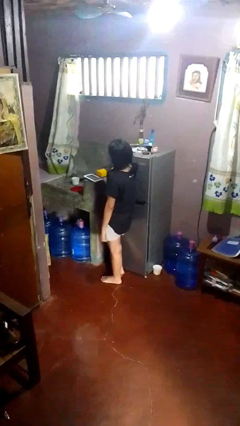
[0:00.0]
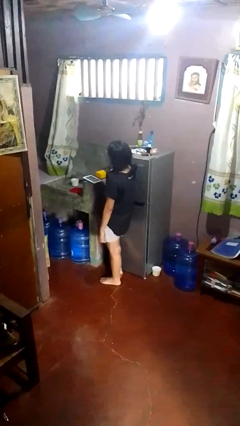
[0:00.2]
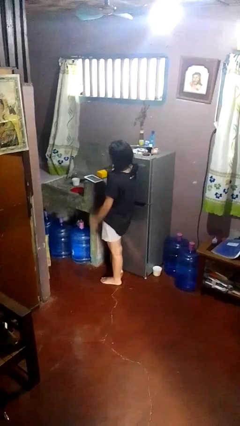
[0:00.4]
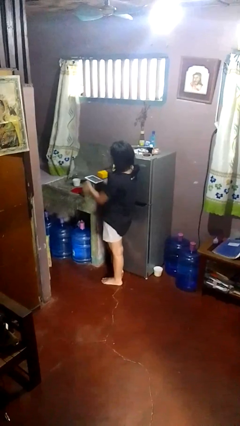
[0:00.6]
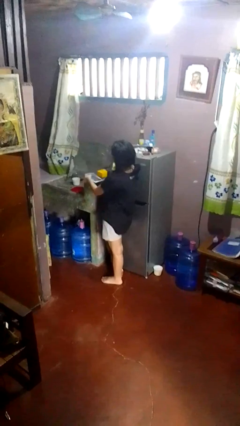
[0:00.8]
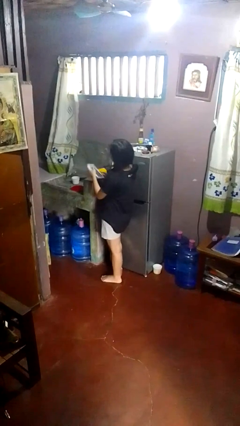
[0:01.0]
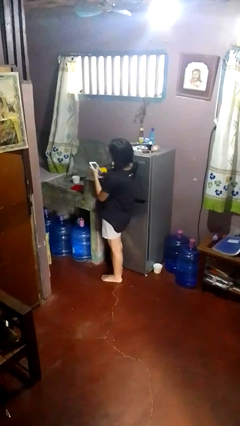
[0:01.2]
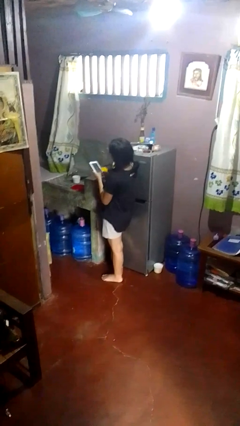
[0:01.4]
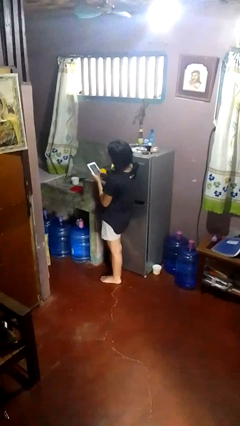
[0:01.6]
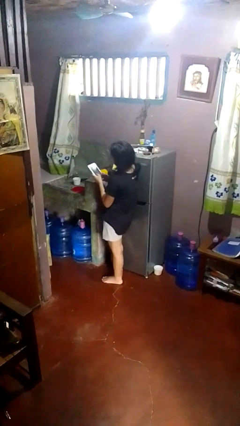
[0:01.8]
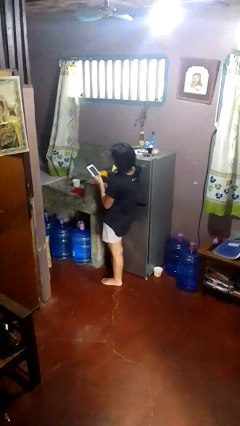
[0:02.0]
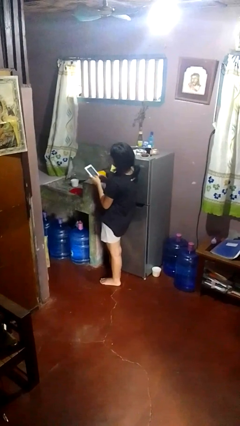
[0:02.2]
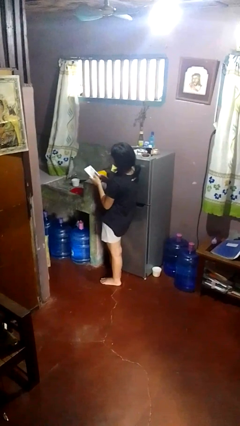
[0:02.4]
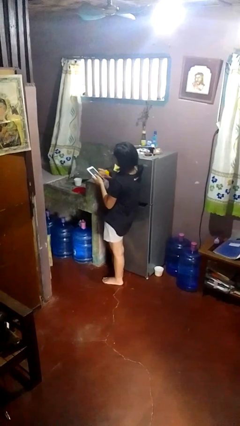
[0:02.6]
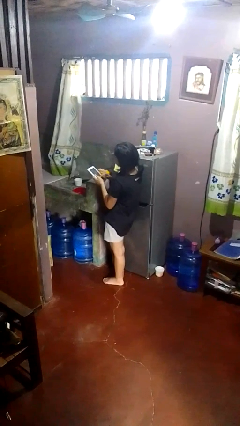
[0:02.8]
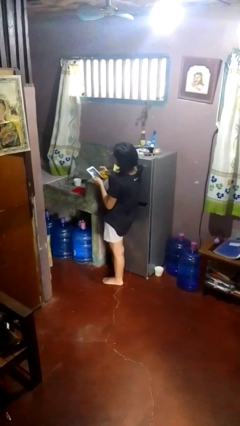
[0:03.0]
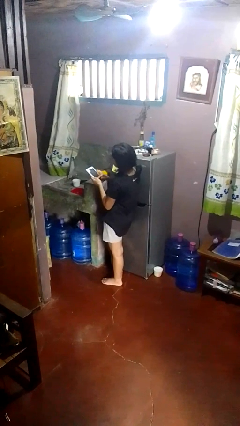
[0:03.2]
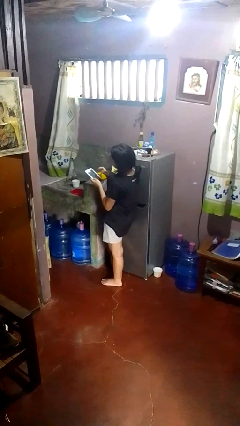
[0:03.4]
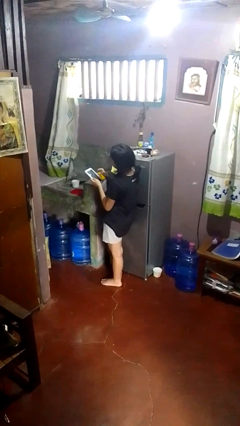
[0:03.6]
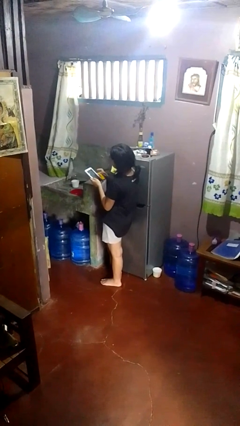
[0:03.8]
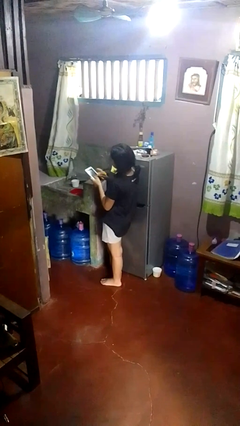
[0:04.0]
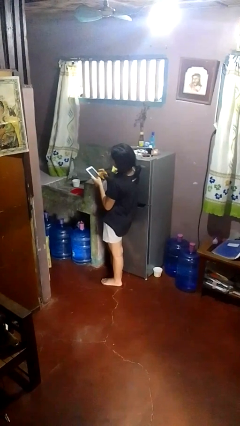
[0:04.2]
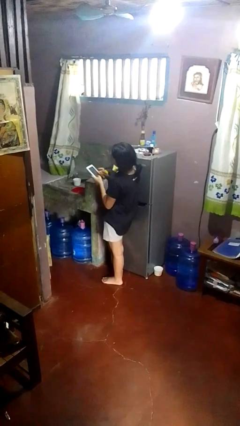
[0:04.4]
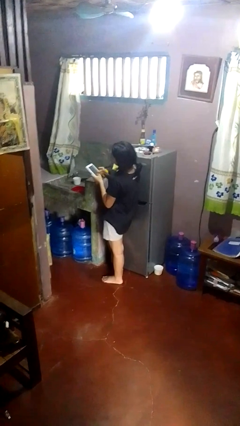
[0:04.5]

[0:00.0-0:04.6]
person interacts with tablet

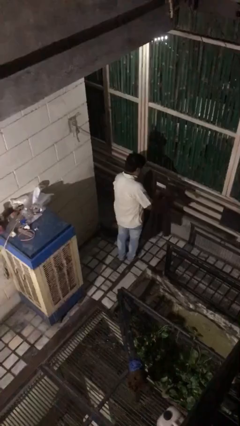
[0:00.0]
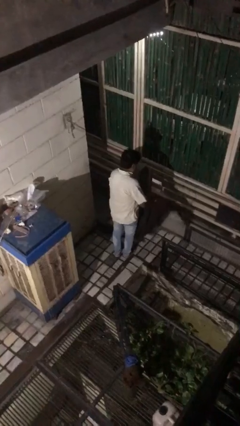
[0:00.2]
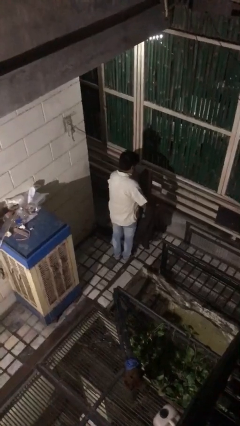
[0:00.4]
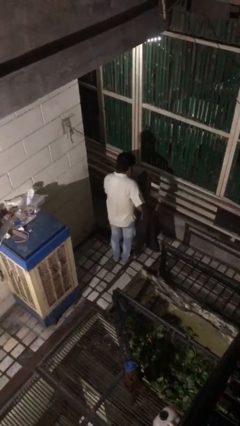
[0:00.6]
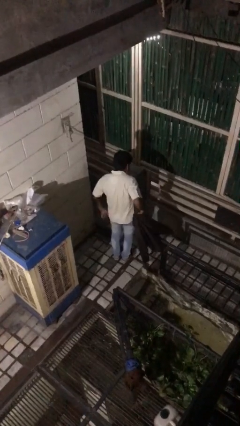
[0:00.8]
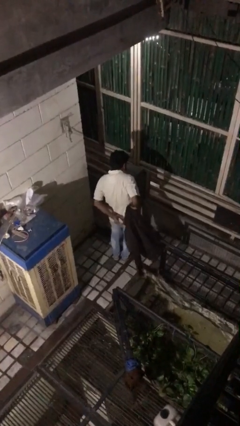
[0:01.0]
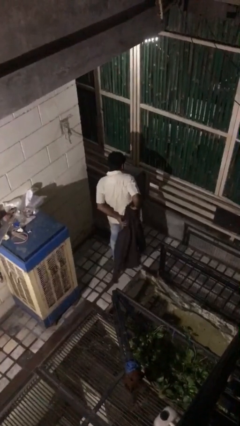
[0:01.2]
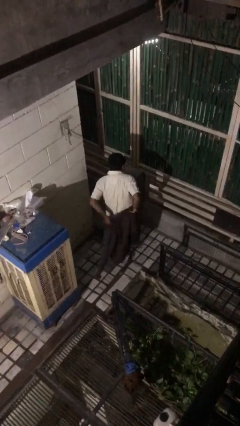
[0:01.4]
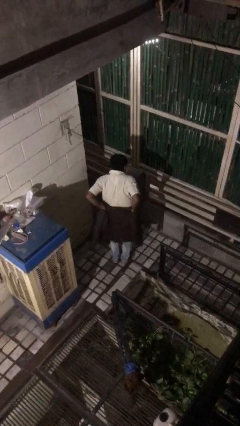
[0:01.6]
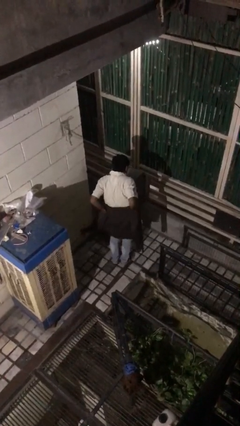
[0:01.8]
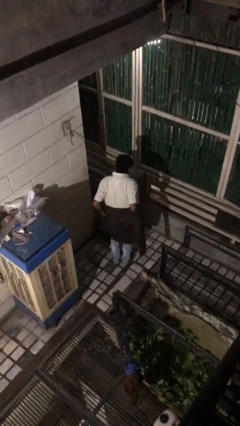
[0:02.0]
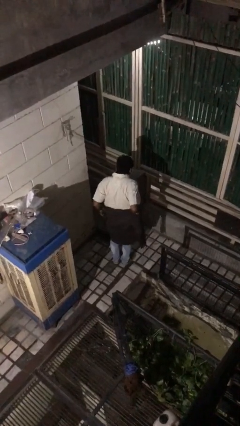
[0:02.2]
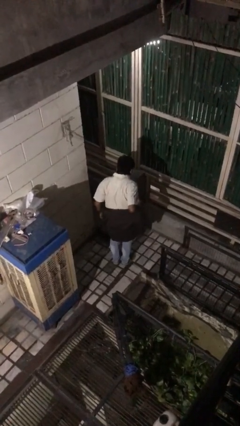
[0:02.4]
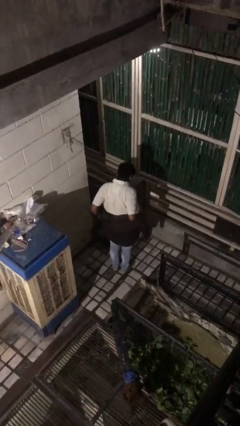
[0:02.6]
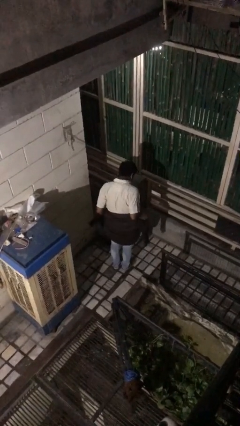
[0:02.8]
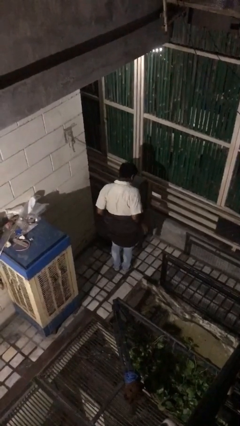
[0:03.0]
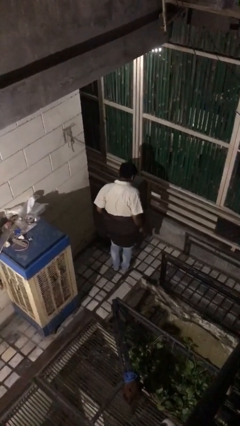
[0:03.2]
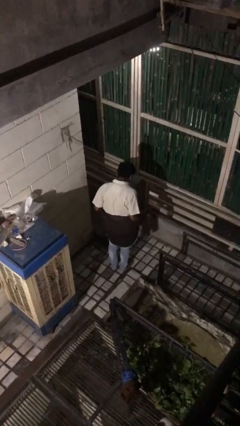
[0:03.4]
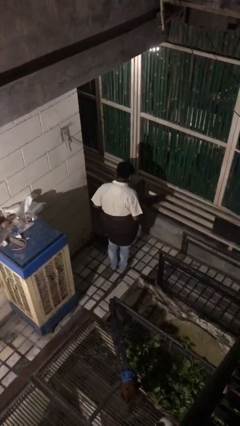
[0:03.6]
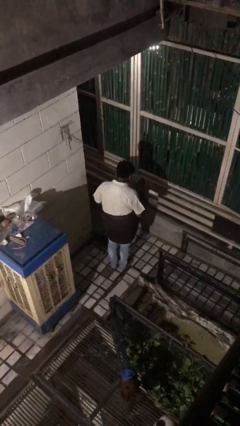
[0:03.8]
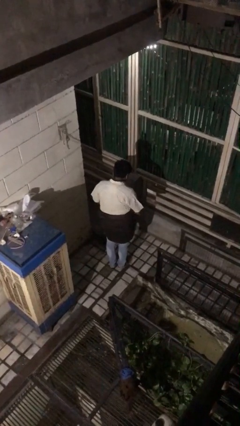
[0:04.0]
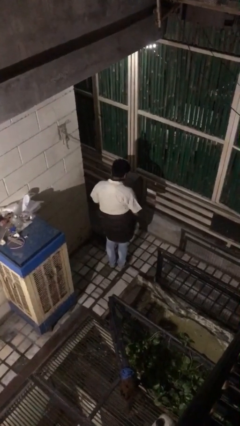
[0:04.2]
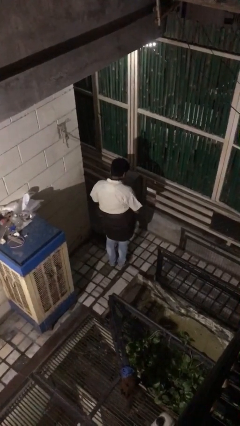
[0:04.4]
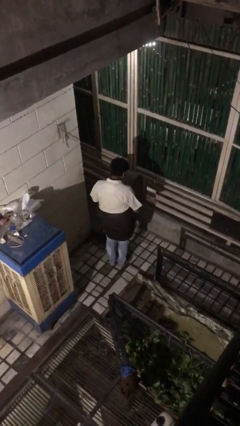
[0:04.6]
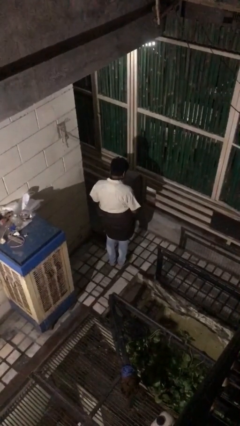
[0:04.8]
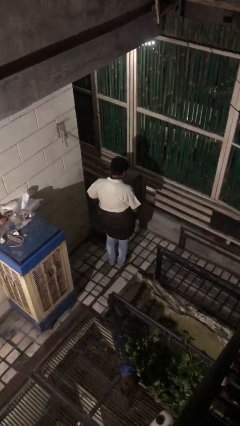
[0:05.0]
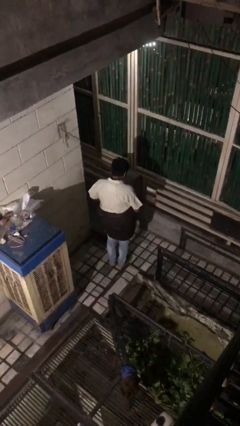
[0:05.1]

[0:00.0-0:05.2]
person ties jacket around waist

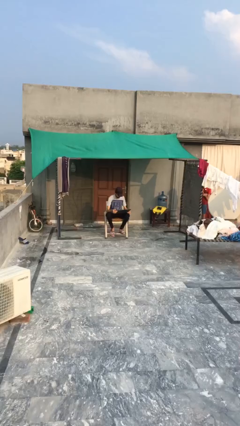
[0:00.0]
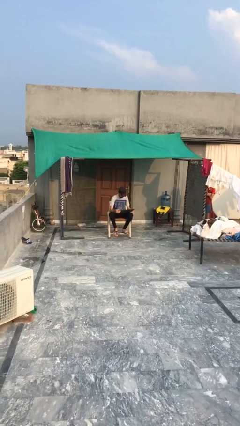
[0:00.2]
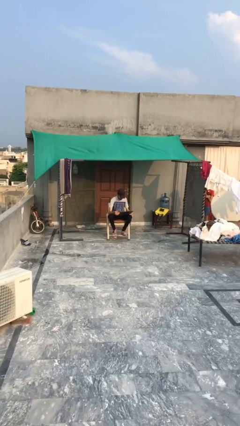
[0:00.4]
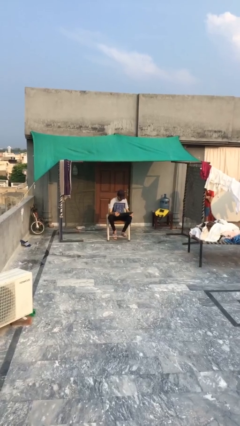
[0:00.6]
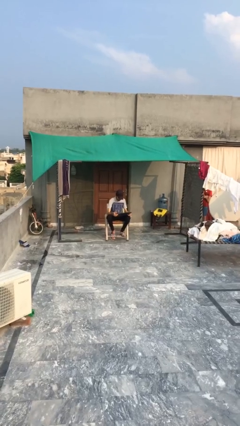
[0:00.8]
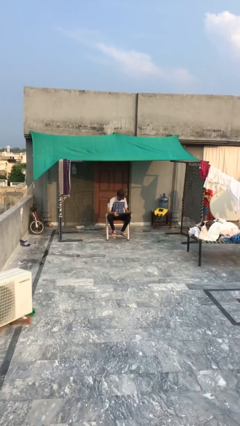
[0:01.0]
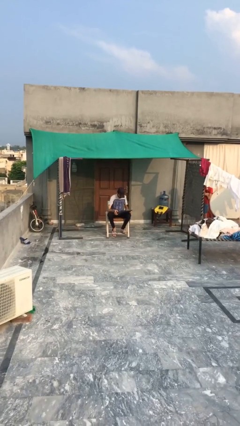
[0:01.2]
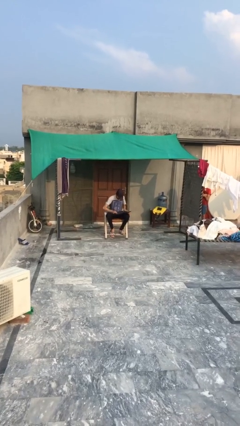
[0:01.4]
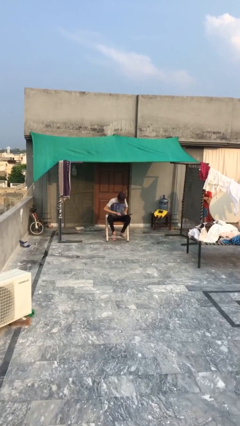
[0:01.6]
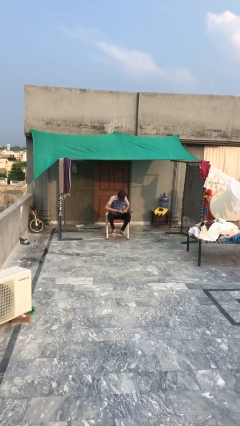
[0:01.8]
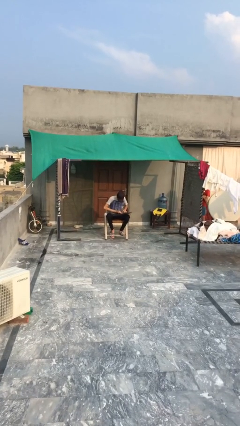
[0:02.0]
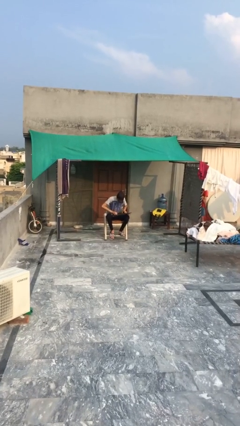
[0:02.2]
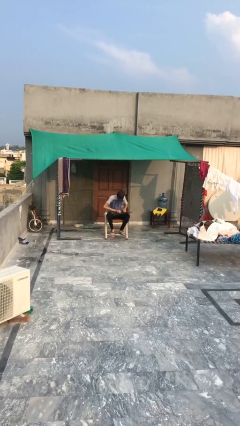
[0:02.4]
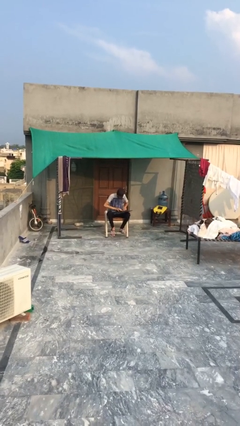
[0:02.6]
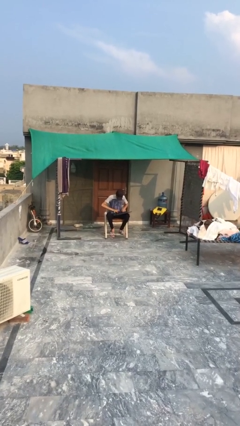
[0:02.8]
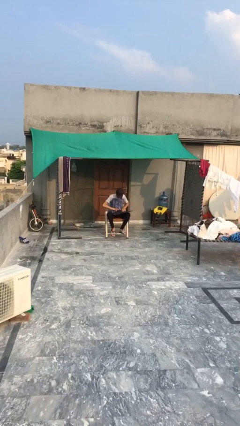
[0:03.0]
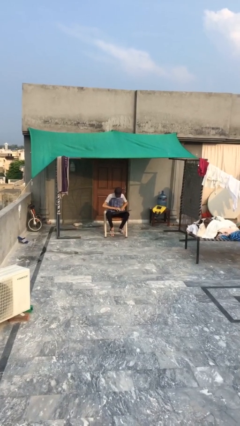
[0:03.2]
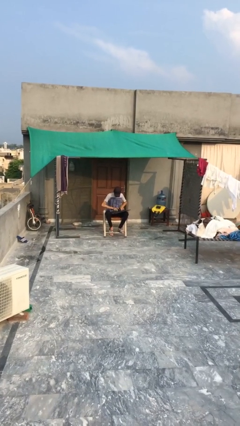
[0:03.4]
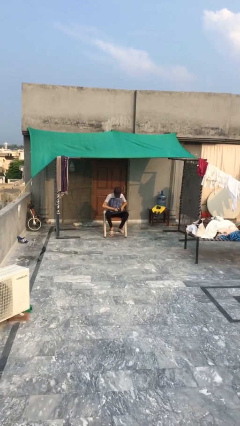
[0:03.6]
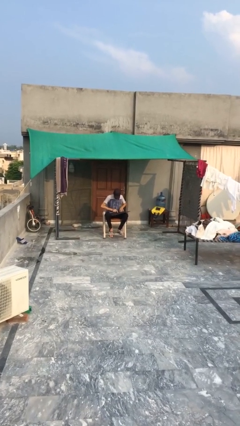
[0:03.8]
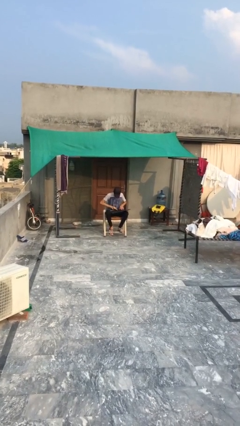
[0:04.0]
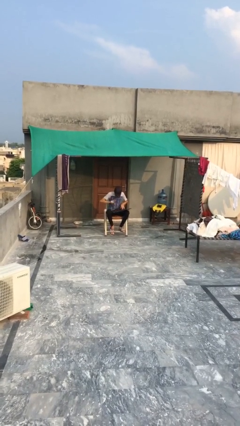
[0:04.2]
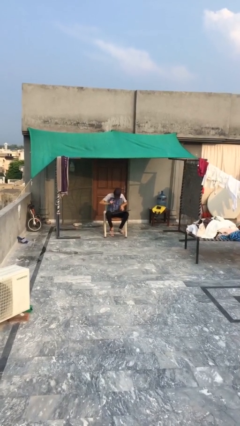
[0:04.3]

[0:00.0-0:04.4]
person interacts with laptop

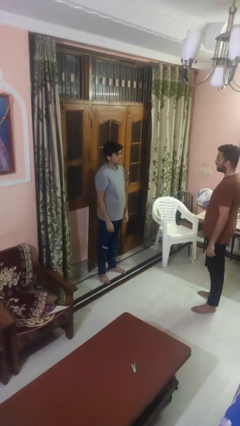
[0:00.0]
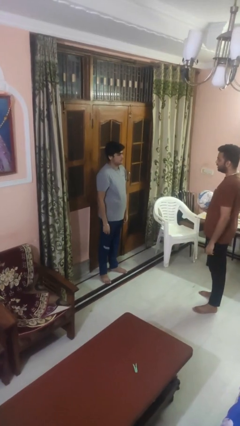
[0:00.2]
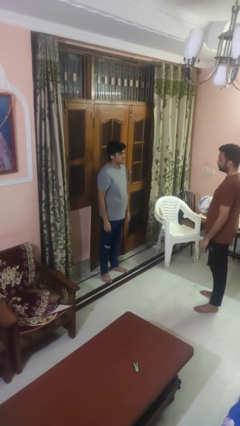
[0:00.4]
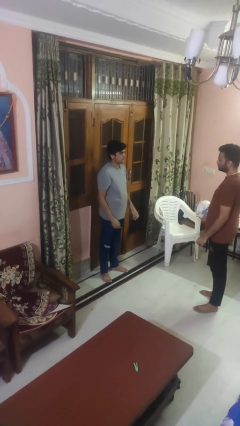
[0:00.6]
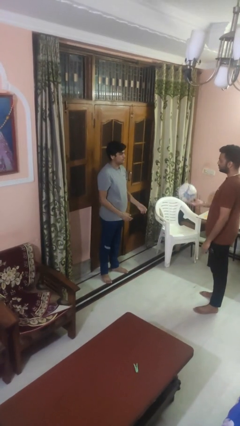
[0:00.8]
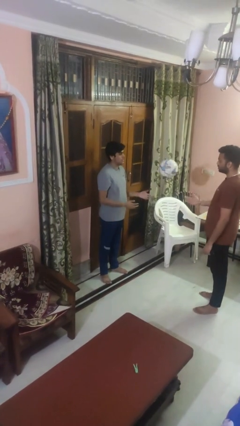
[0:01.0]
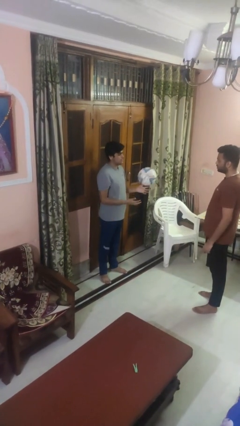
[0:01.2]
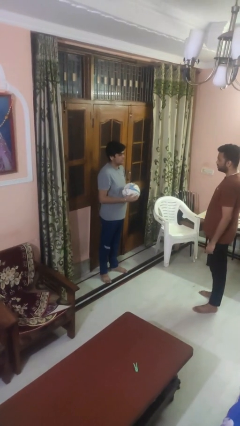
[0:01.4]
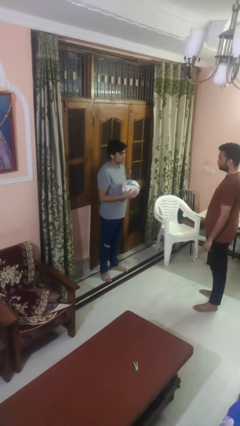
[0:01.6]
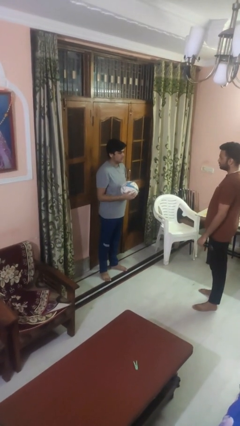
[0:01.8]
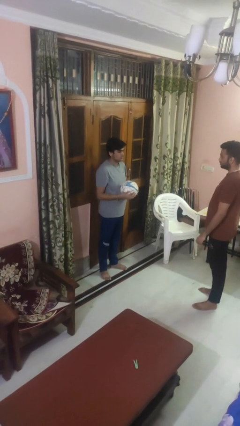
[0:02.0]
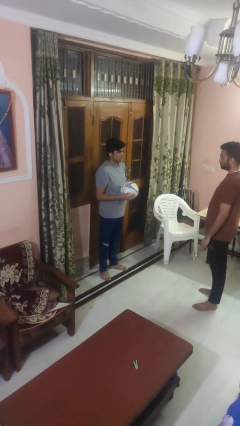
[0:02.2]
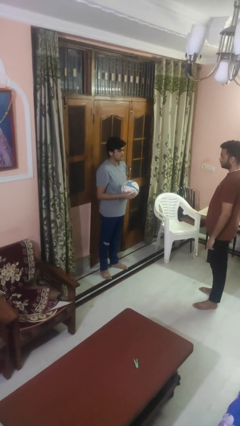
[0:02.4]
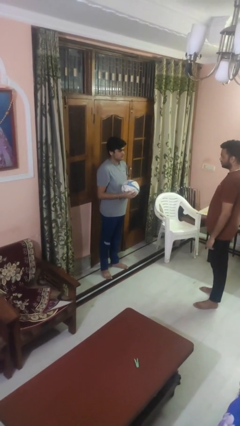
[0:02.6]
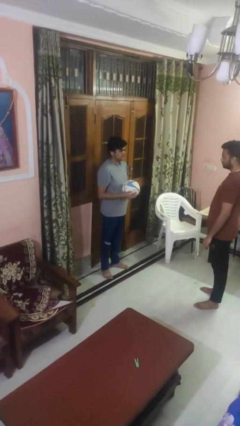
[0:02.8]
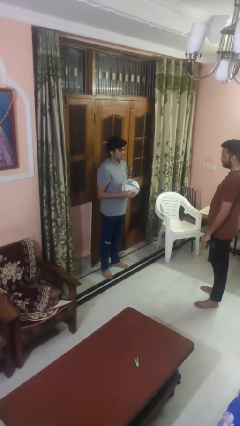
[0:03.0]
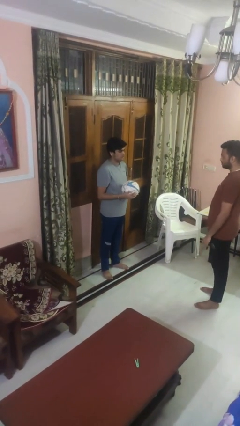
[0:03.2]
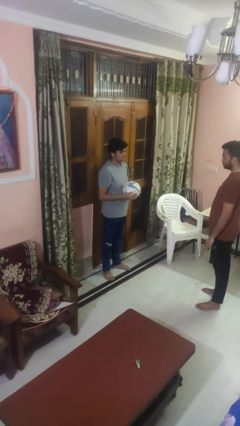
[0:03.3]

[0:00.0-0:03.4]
person catches object from person

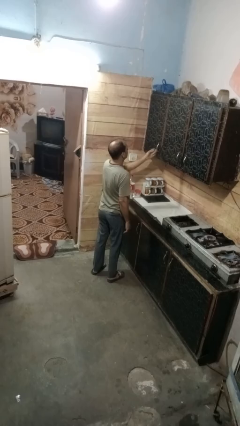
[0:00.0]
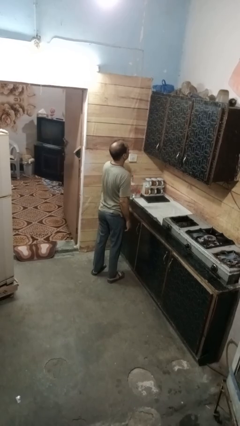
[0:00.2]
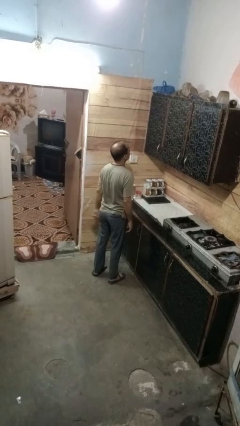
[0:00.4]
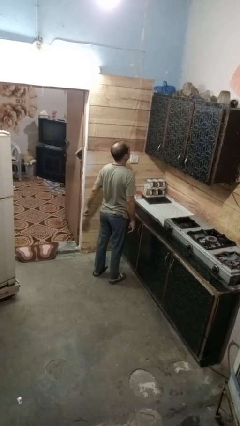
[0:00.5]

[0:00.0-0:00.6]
person takes object from cabinet
